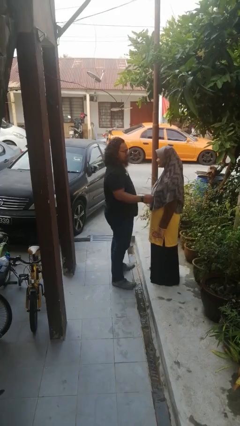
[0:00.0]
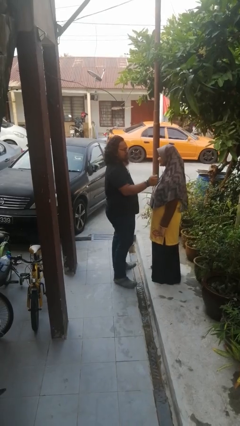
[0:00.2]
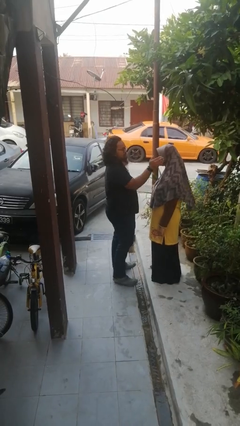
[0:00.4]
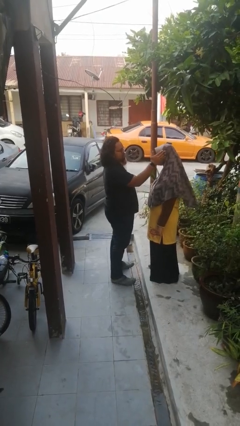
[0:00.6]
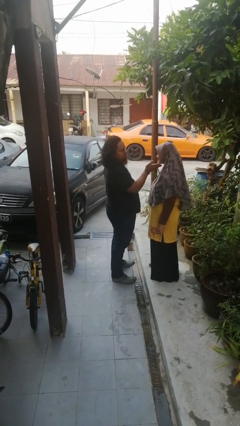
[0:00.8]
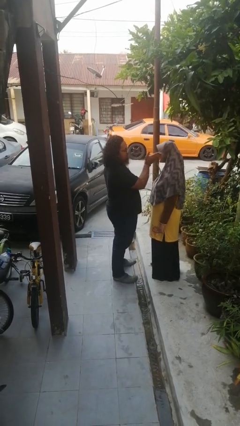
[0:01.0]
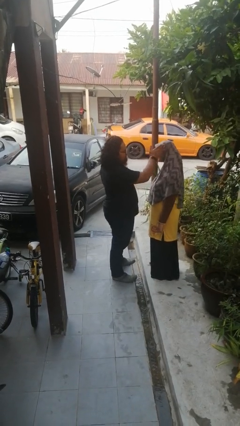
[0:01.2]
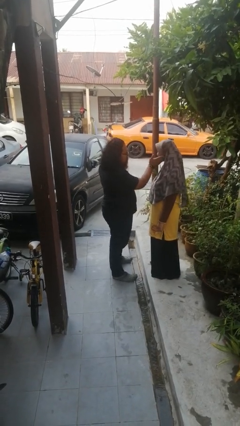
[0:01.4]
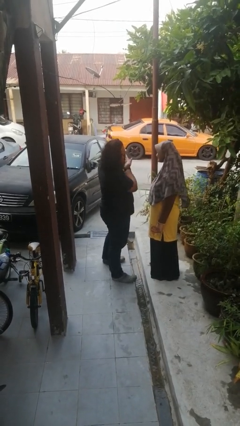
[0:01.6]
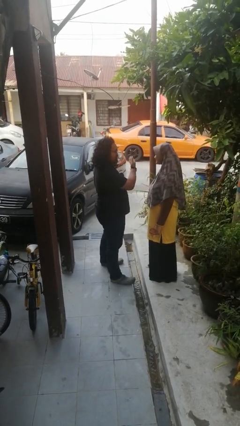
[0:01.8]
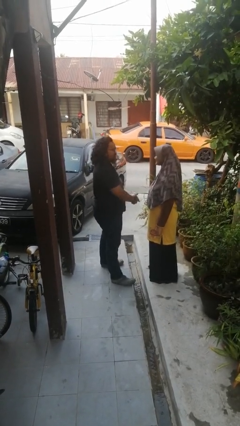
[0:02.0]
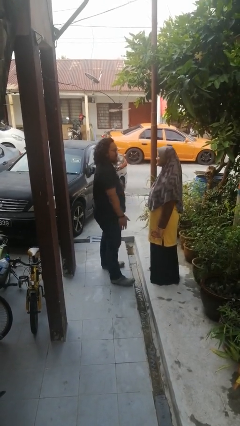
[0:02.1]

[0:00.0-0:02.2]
person touches face of person

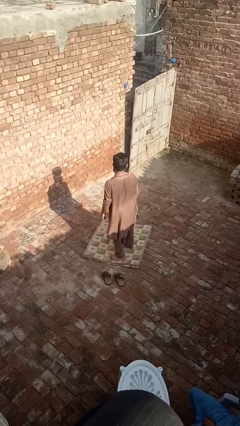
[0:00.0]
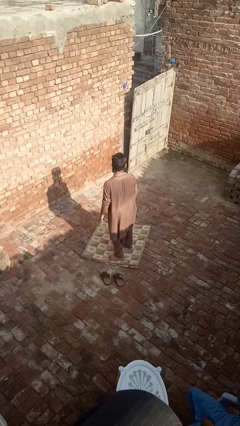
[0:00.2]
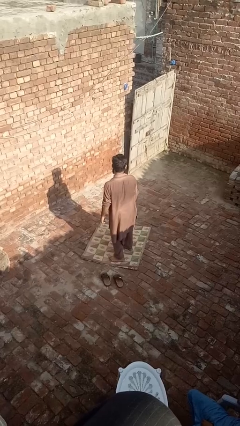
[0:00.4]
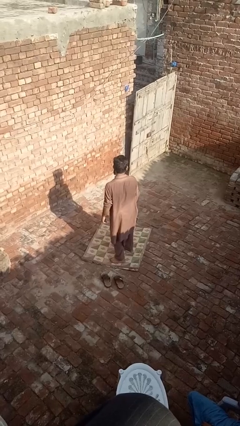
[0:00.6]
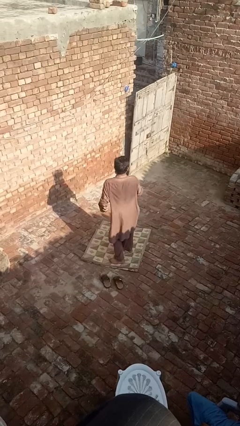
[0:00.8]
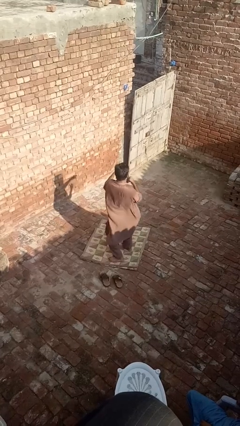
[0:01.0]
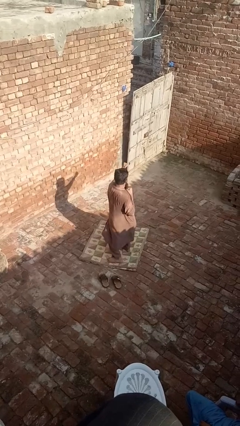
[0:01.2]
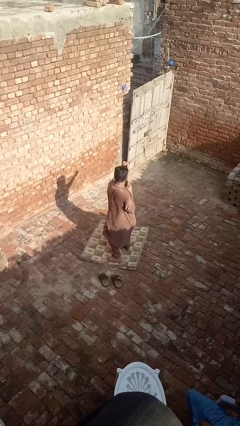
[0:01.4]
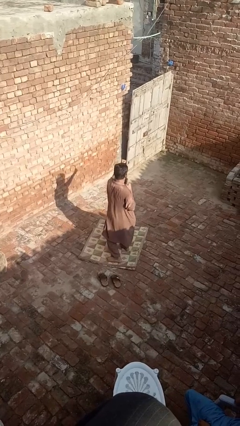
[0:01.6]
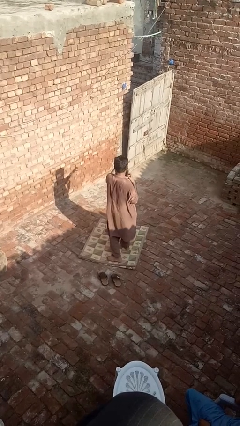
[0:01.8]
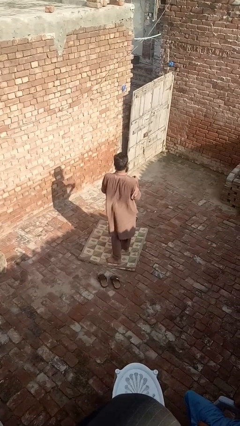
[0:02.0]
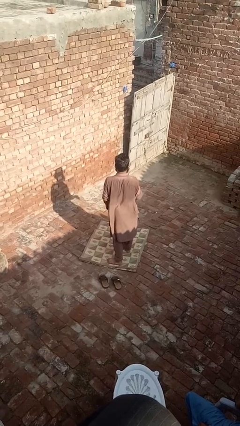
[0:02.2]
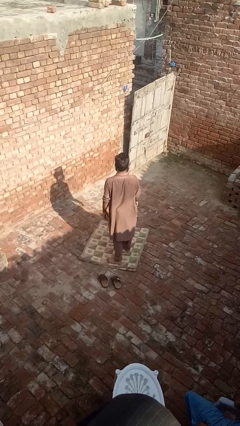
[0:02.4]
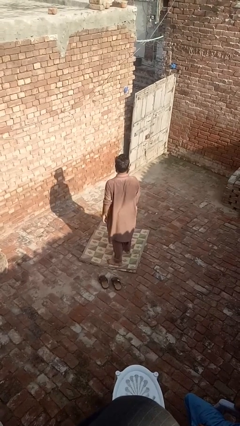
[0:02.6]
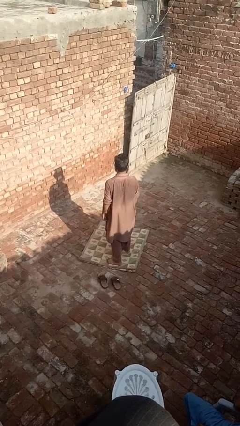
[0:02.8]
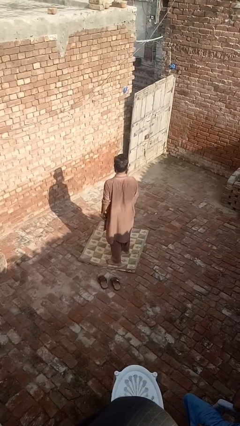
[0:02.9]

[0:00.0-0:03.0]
person karate chop

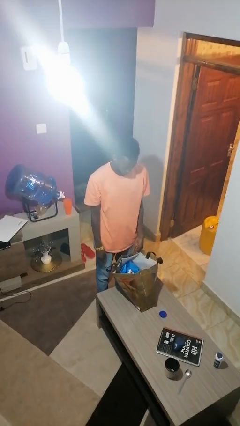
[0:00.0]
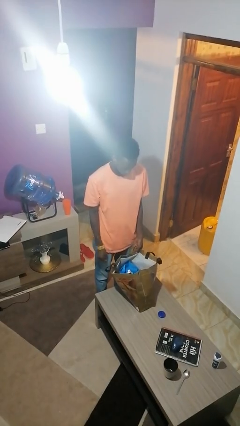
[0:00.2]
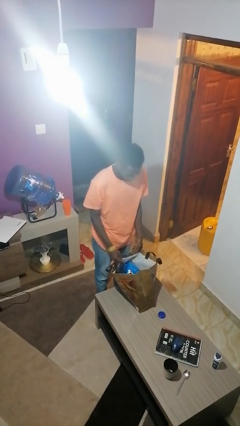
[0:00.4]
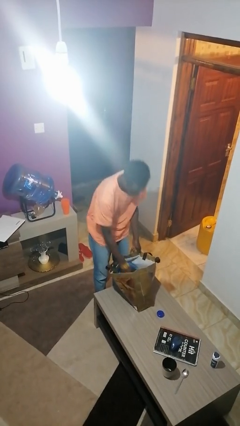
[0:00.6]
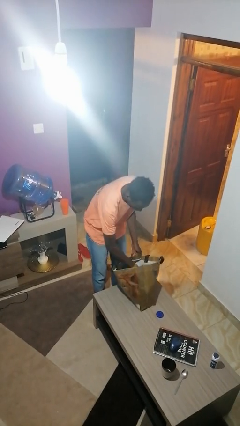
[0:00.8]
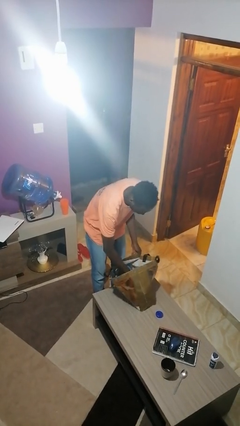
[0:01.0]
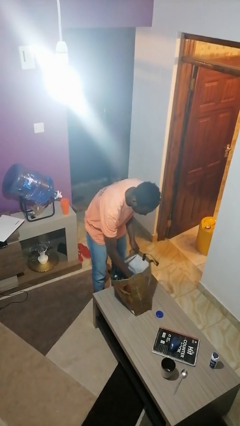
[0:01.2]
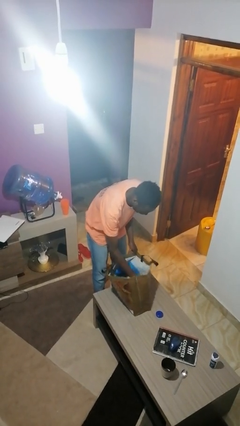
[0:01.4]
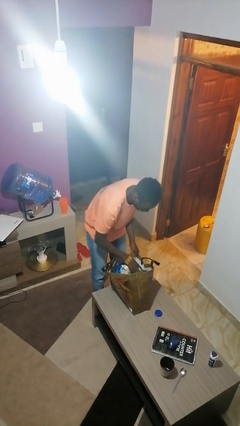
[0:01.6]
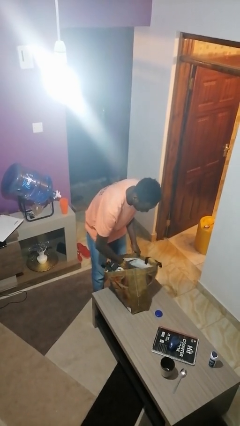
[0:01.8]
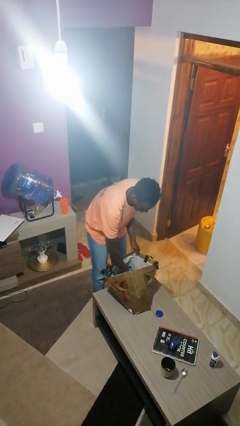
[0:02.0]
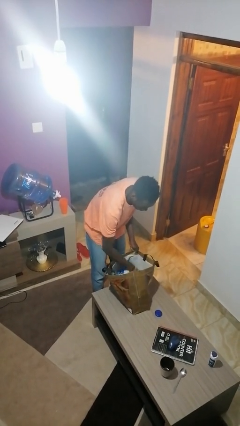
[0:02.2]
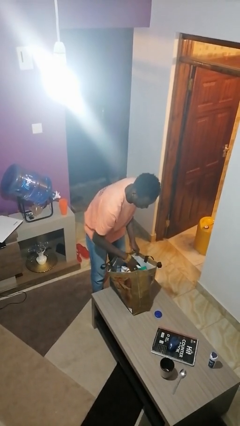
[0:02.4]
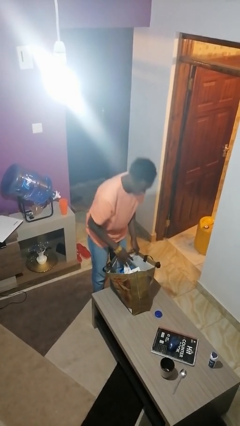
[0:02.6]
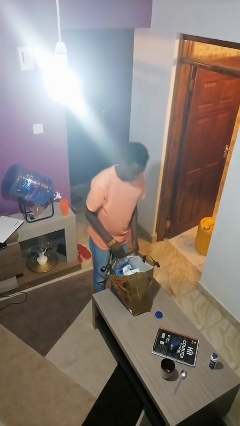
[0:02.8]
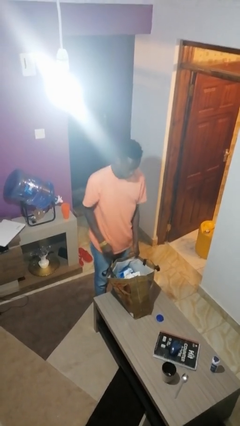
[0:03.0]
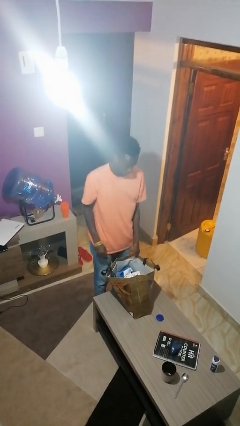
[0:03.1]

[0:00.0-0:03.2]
person searches in bag

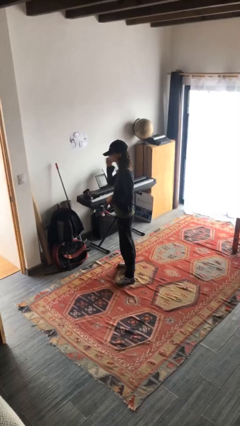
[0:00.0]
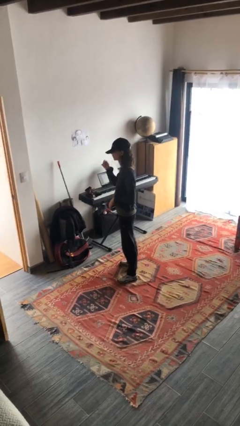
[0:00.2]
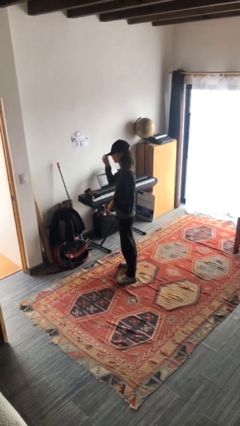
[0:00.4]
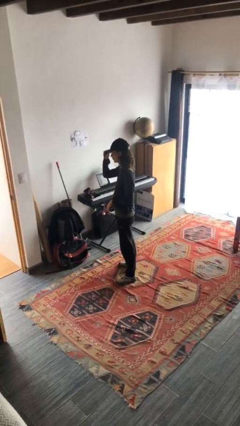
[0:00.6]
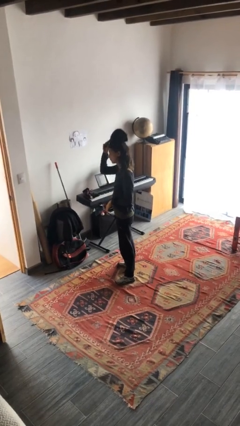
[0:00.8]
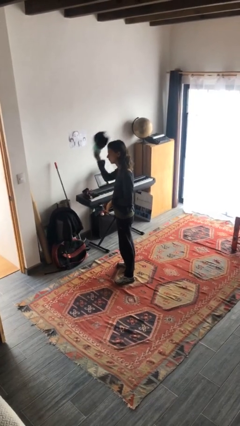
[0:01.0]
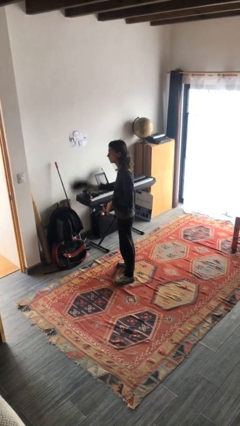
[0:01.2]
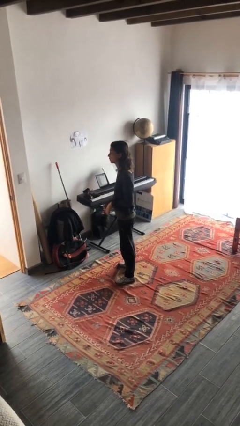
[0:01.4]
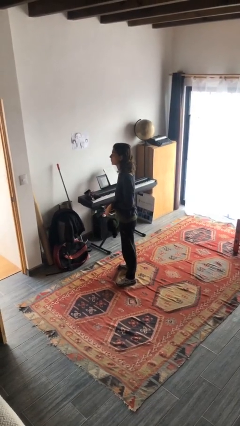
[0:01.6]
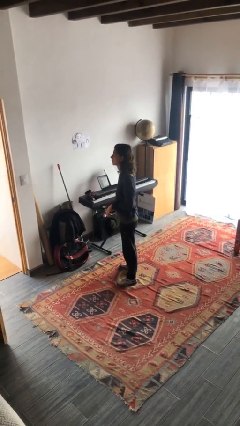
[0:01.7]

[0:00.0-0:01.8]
person takes off hat

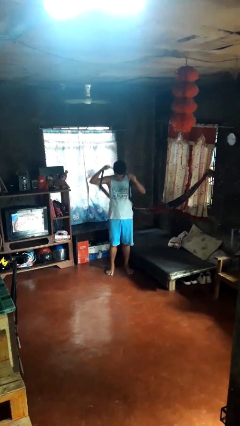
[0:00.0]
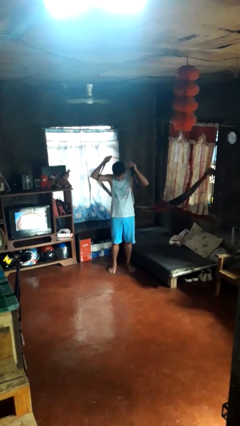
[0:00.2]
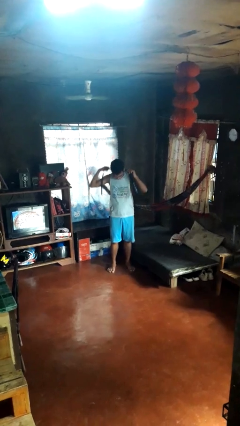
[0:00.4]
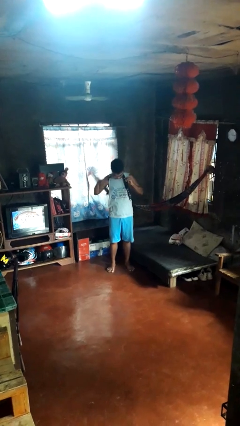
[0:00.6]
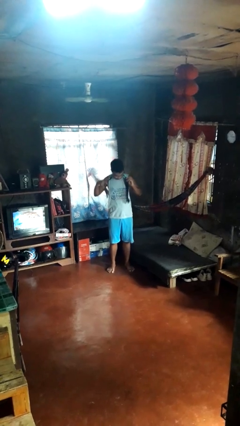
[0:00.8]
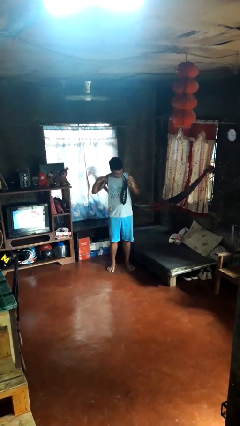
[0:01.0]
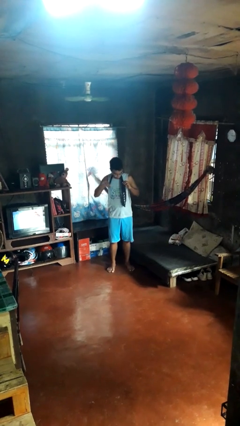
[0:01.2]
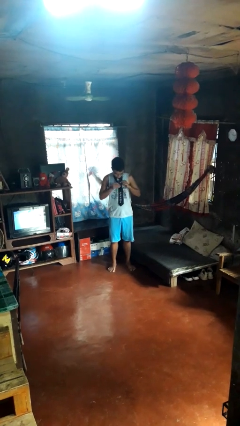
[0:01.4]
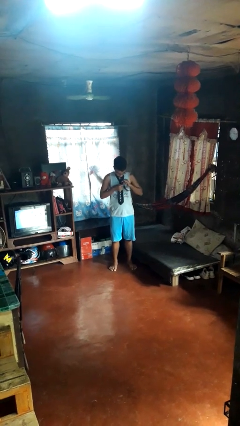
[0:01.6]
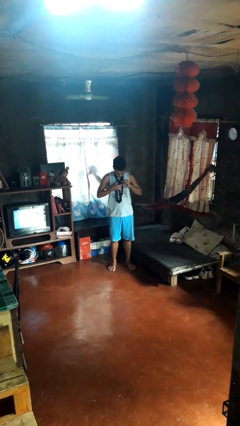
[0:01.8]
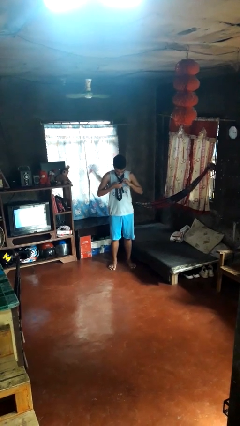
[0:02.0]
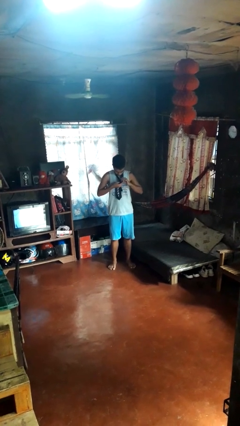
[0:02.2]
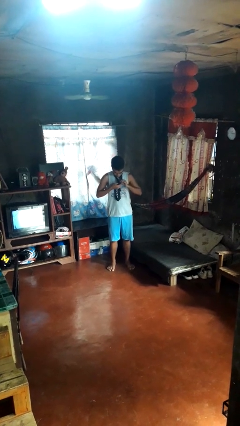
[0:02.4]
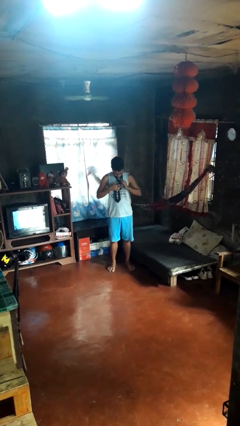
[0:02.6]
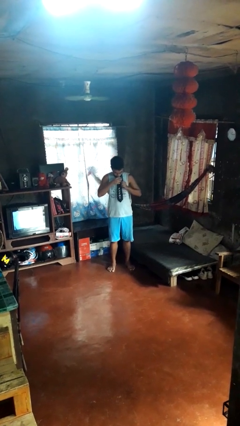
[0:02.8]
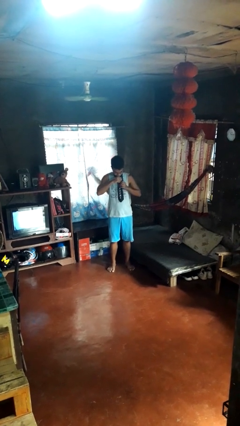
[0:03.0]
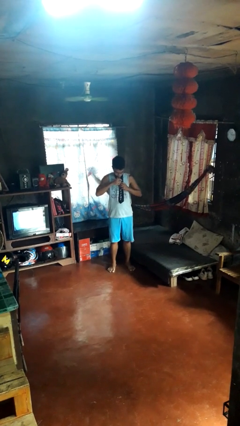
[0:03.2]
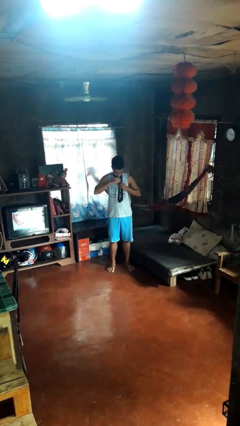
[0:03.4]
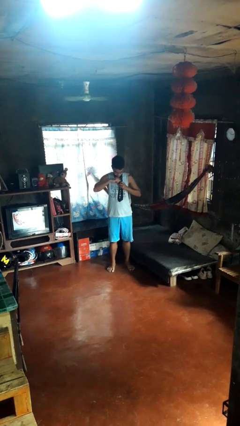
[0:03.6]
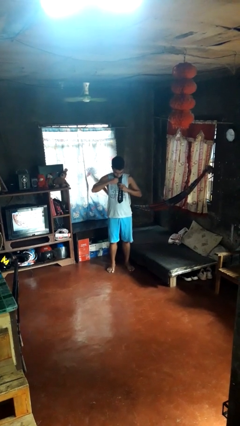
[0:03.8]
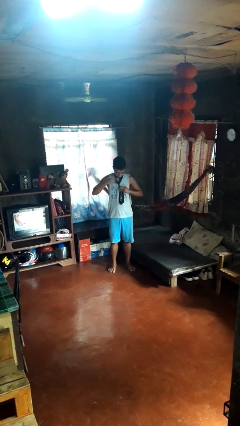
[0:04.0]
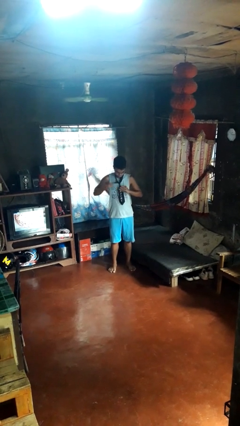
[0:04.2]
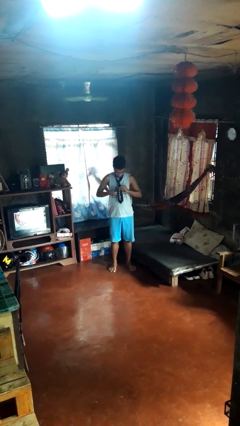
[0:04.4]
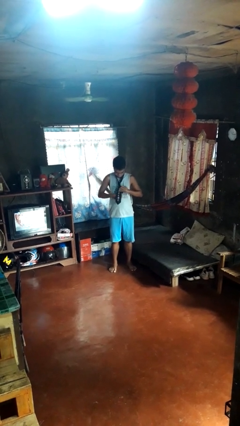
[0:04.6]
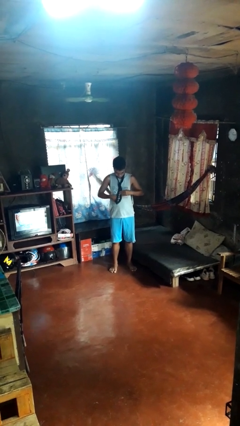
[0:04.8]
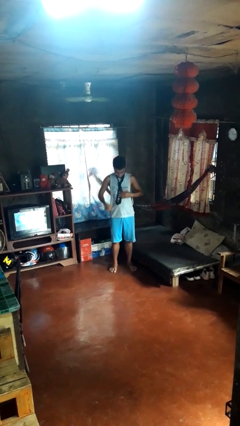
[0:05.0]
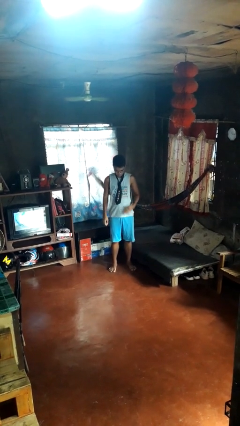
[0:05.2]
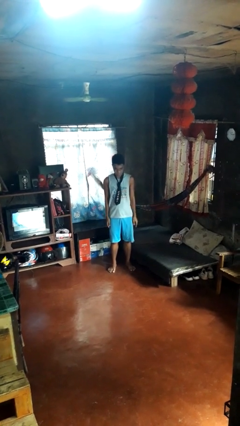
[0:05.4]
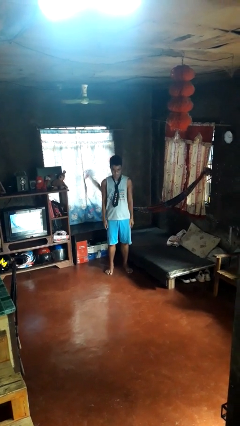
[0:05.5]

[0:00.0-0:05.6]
person puts on necktie

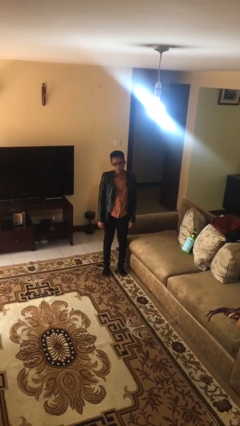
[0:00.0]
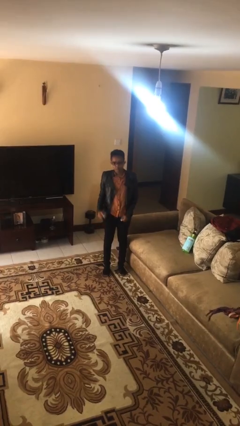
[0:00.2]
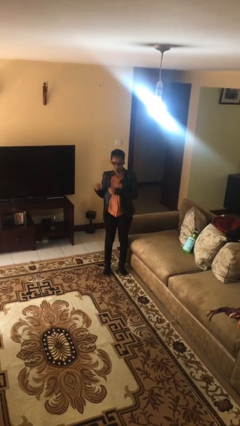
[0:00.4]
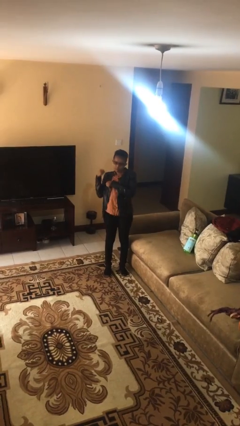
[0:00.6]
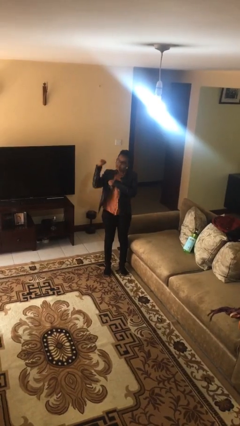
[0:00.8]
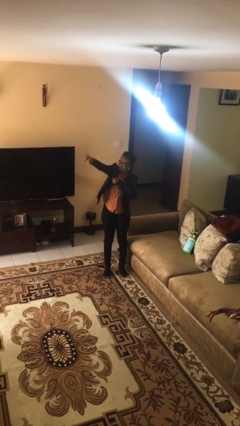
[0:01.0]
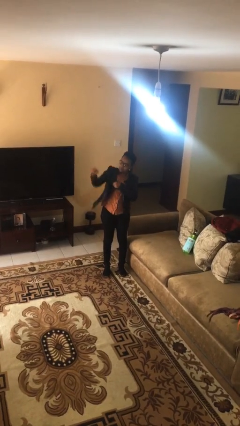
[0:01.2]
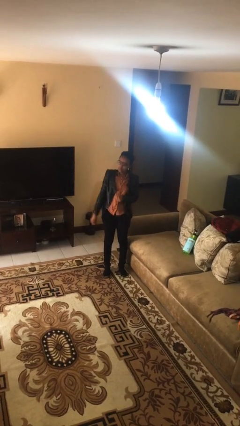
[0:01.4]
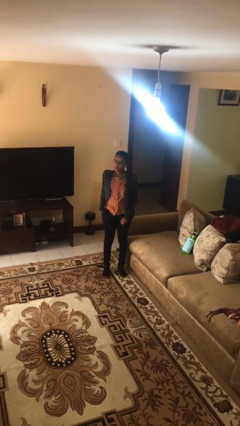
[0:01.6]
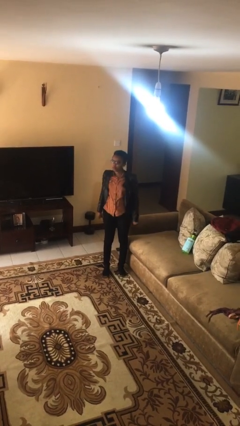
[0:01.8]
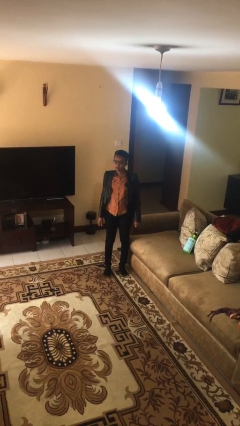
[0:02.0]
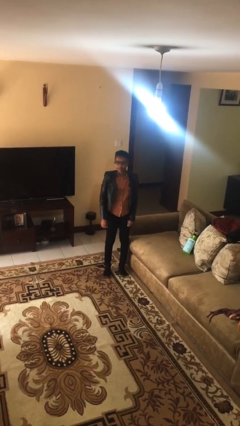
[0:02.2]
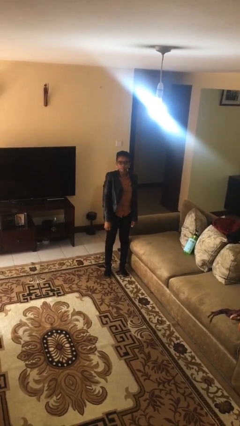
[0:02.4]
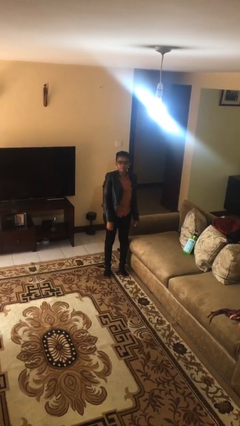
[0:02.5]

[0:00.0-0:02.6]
person punches
